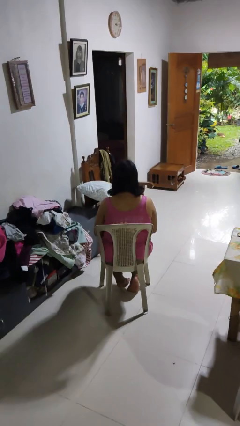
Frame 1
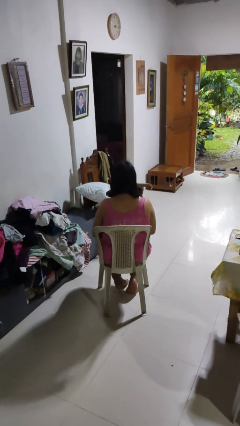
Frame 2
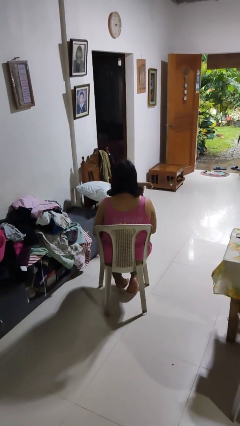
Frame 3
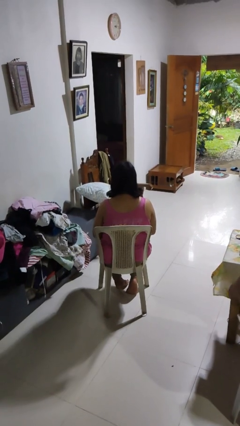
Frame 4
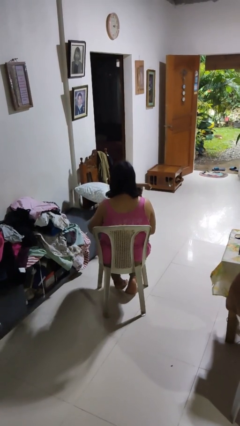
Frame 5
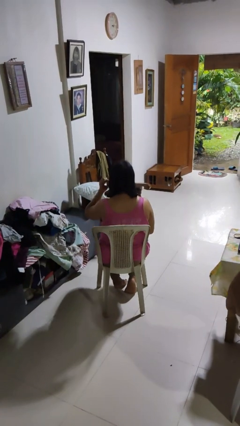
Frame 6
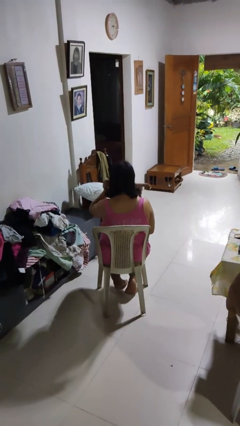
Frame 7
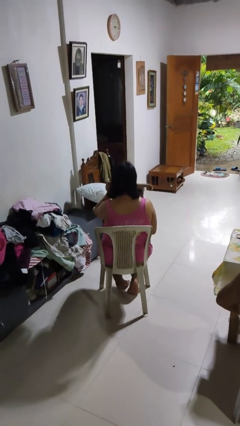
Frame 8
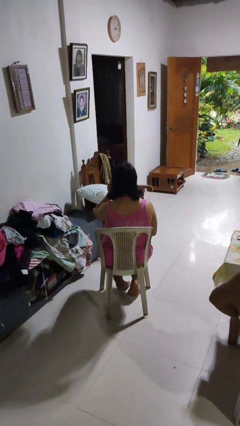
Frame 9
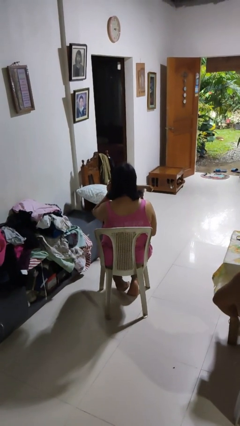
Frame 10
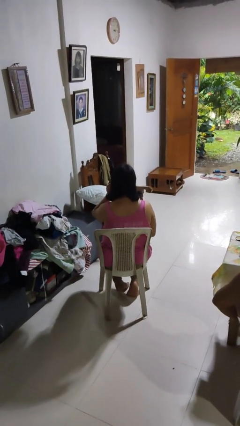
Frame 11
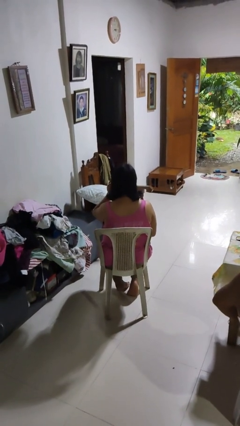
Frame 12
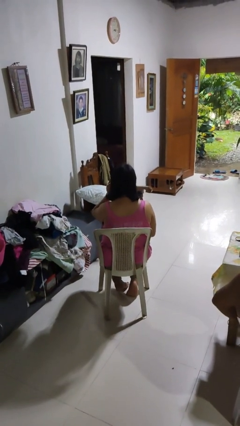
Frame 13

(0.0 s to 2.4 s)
person touches earlobe

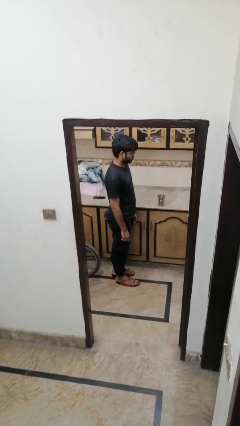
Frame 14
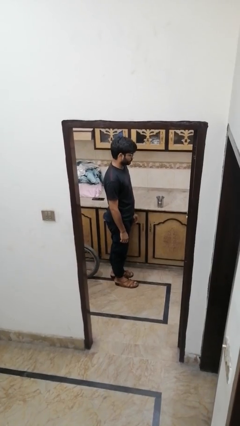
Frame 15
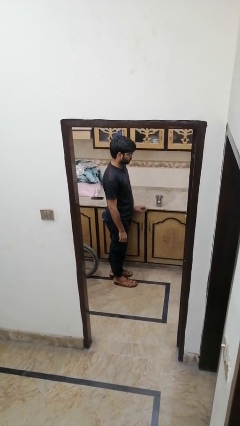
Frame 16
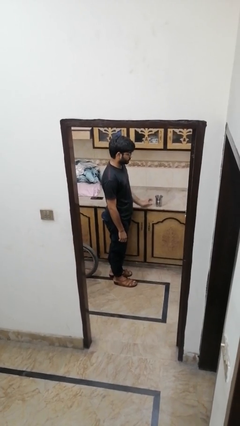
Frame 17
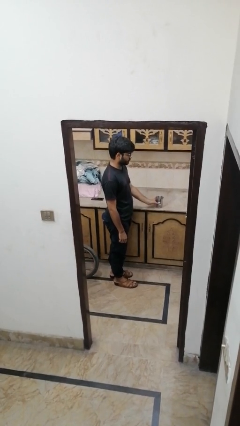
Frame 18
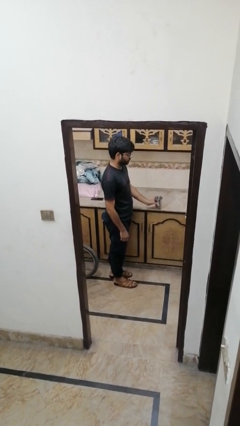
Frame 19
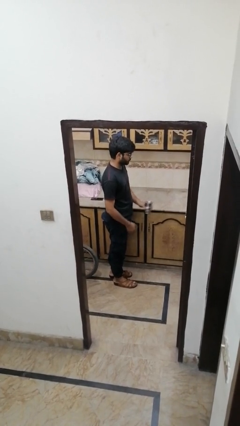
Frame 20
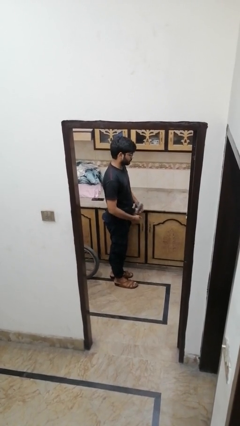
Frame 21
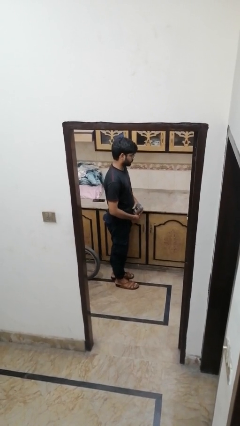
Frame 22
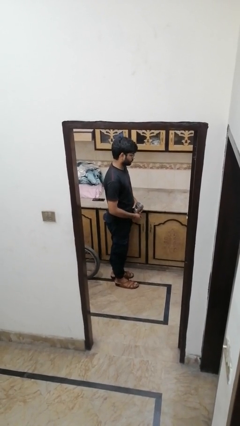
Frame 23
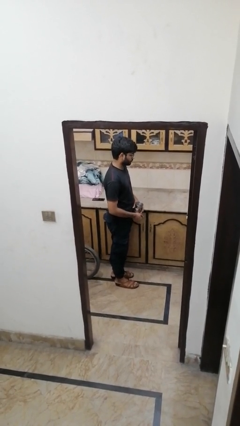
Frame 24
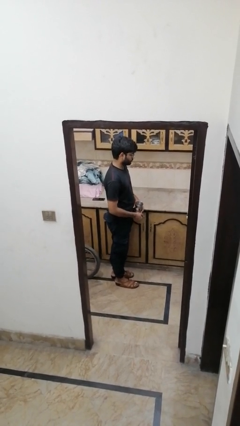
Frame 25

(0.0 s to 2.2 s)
person picks up object from countertop

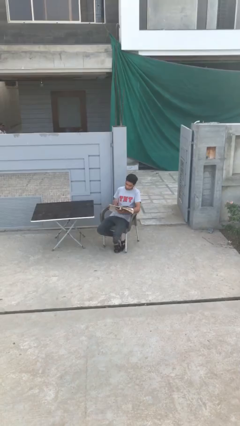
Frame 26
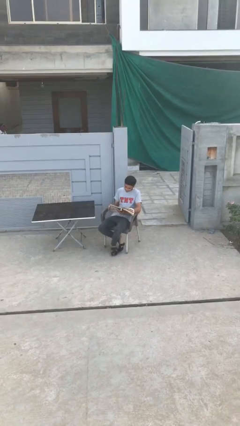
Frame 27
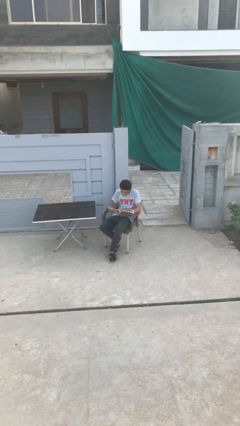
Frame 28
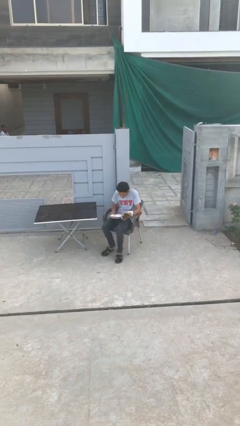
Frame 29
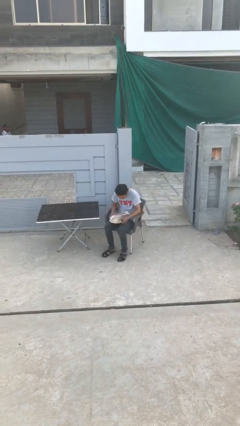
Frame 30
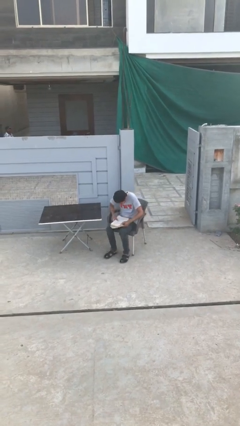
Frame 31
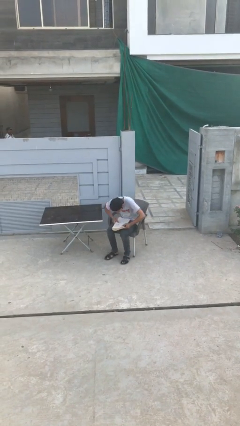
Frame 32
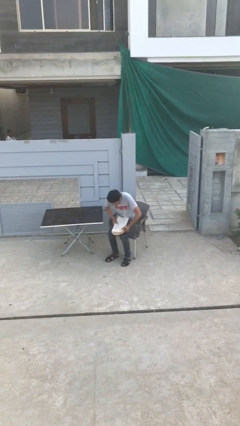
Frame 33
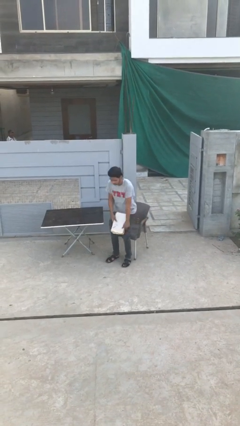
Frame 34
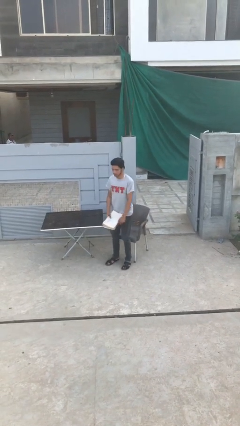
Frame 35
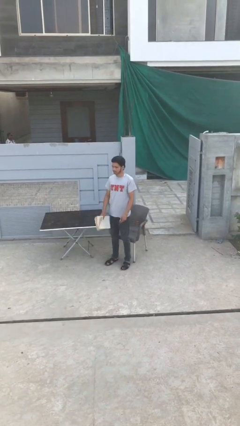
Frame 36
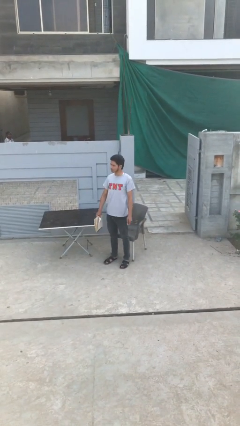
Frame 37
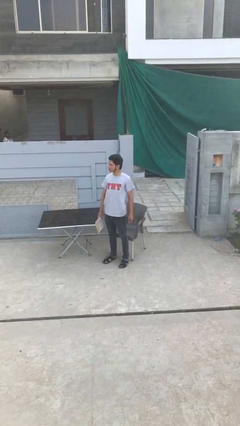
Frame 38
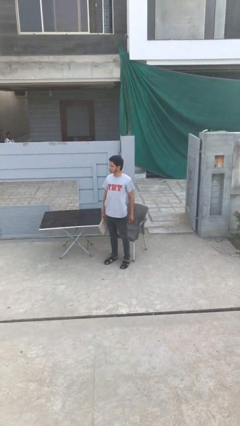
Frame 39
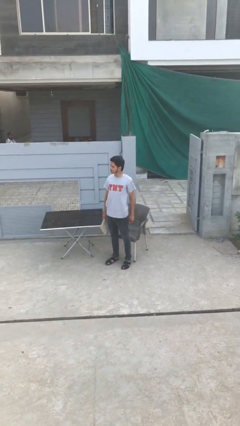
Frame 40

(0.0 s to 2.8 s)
person stands up

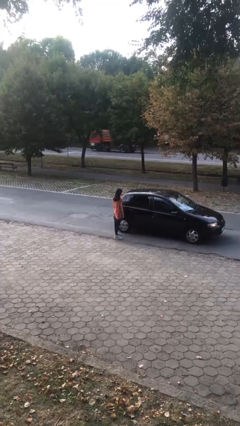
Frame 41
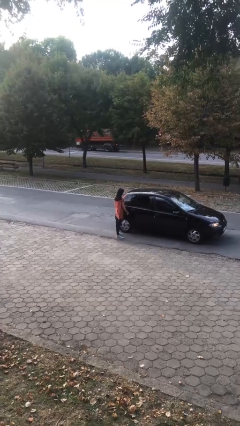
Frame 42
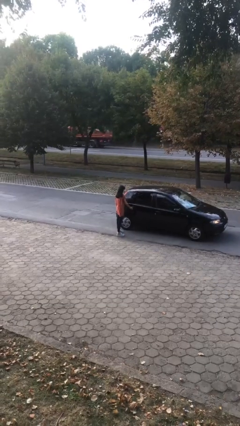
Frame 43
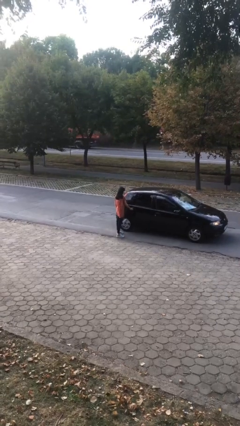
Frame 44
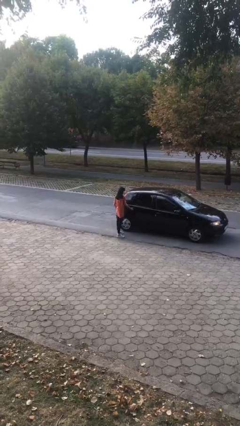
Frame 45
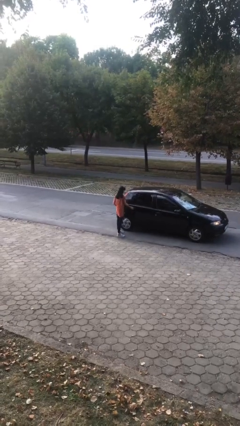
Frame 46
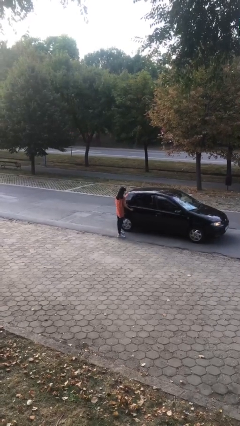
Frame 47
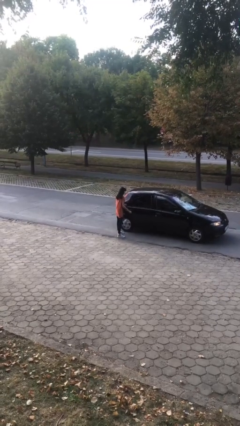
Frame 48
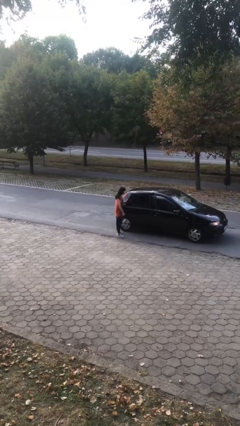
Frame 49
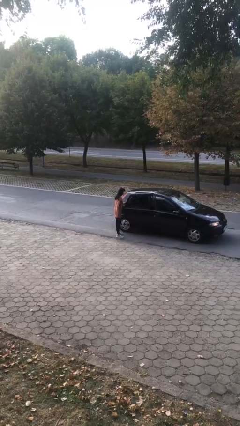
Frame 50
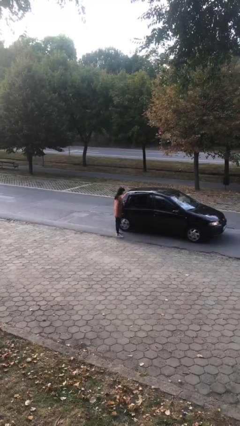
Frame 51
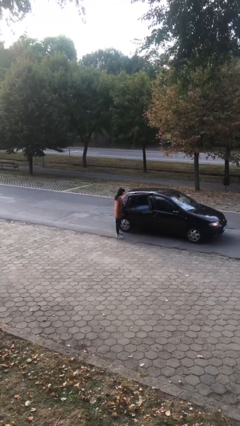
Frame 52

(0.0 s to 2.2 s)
person opens car door

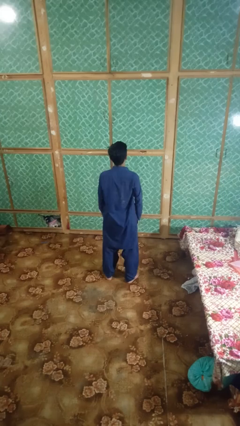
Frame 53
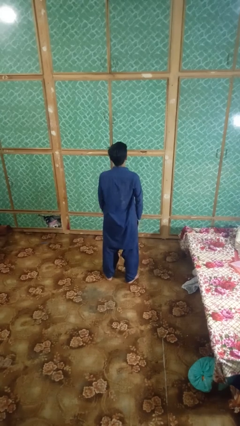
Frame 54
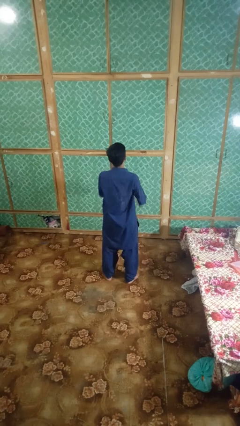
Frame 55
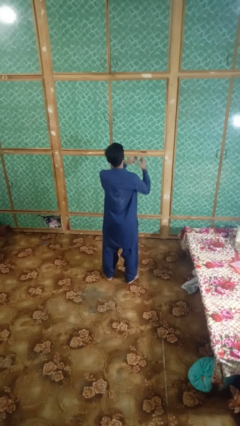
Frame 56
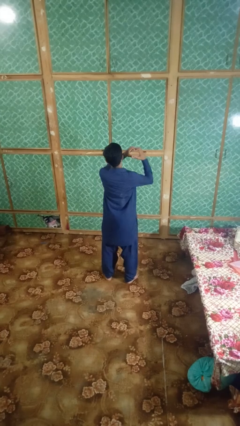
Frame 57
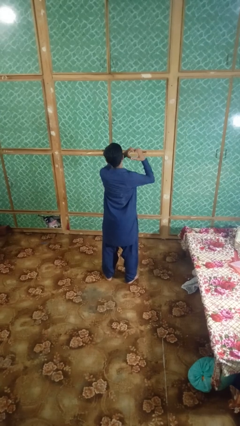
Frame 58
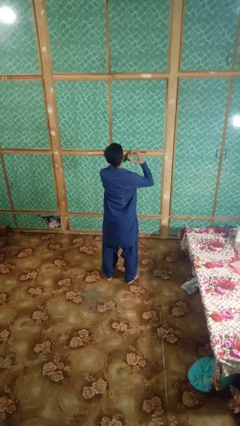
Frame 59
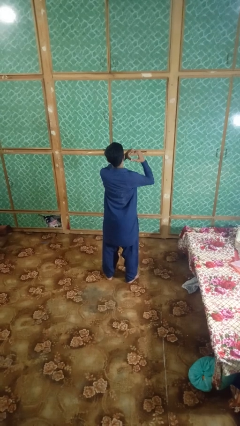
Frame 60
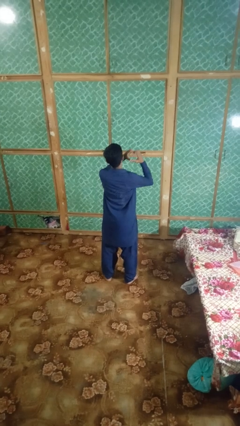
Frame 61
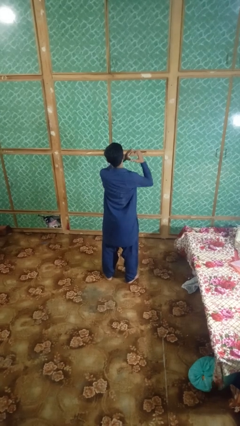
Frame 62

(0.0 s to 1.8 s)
person gestures heart

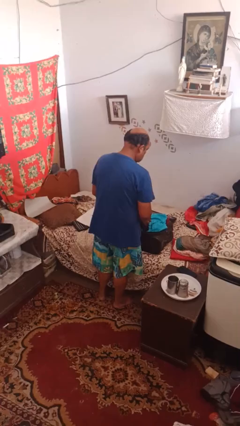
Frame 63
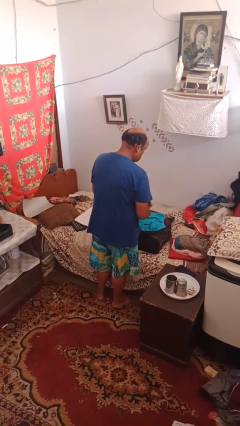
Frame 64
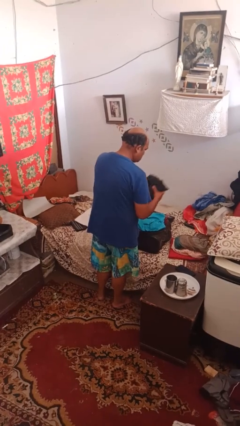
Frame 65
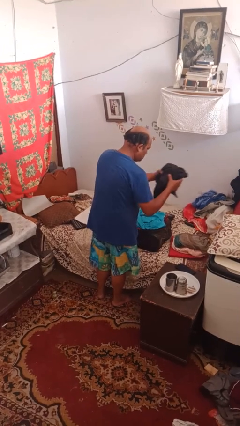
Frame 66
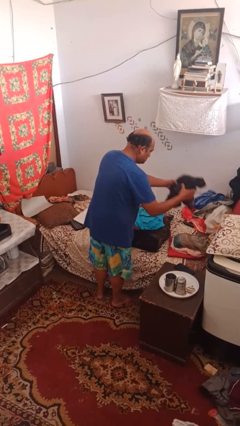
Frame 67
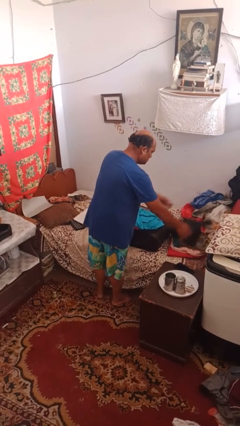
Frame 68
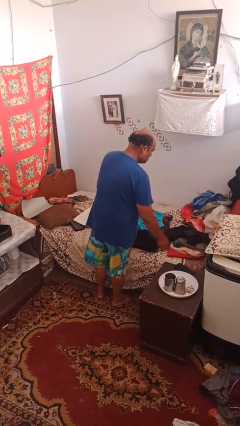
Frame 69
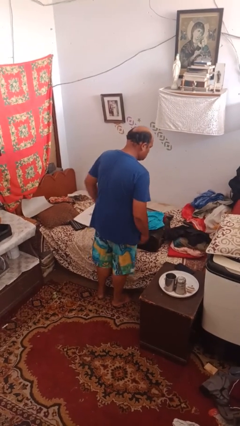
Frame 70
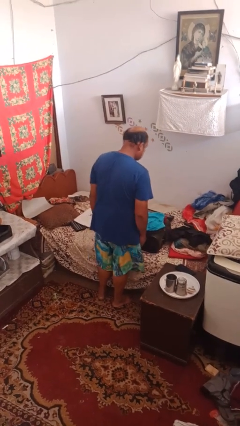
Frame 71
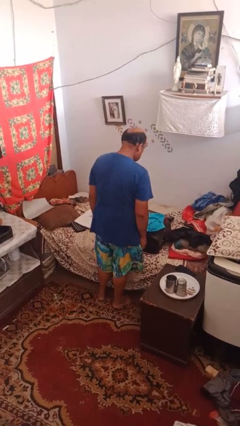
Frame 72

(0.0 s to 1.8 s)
person unloads clothes from suitcase

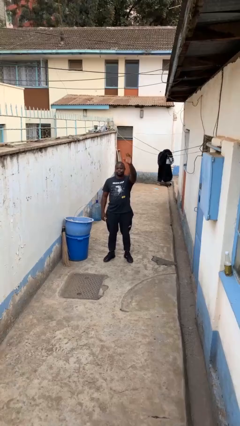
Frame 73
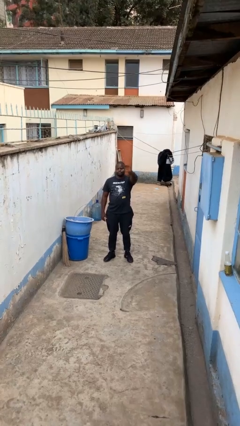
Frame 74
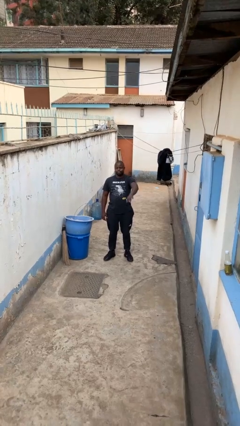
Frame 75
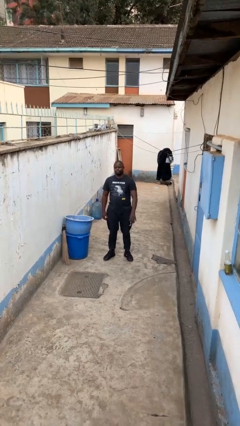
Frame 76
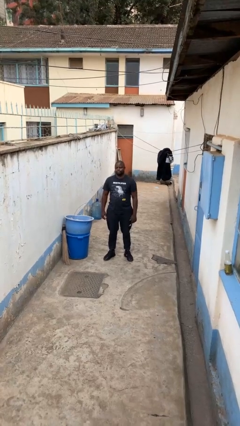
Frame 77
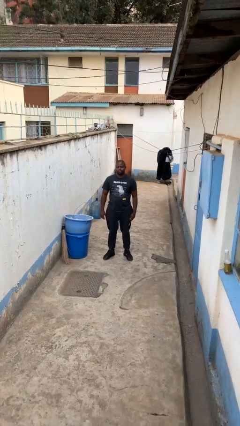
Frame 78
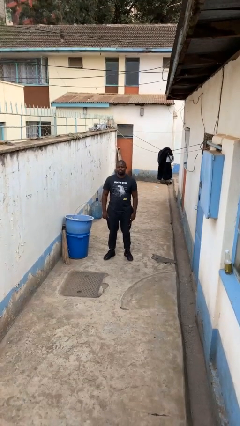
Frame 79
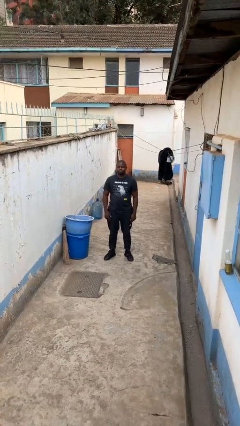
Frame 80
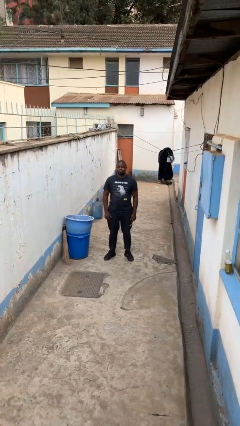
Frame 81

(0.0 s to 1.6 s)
person gestures swipe down

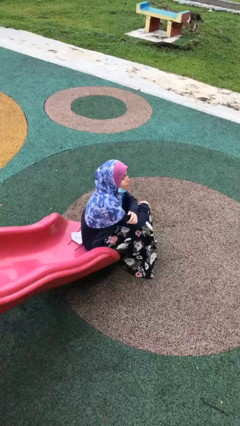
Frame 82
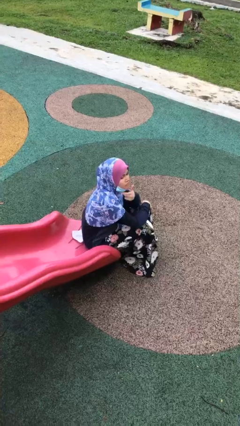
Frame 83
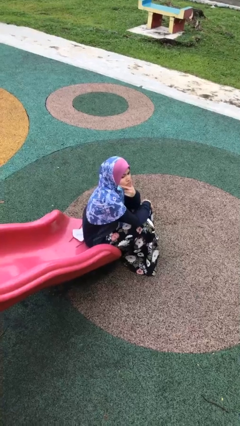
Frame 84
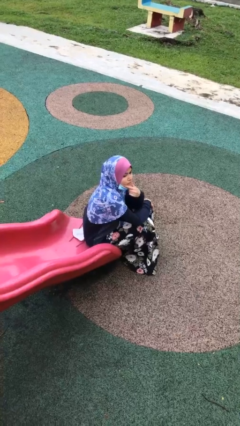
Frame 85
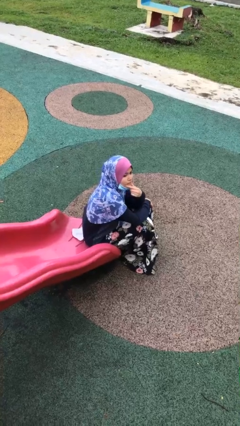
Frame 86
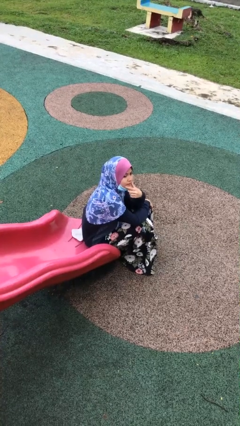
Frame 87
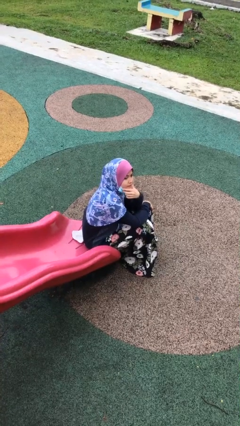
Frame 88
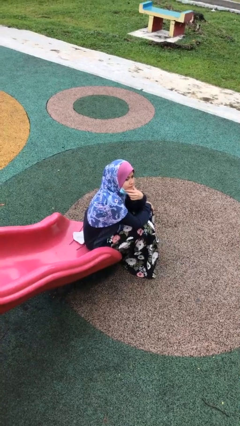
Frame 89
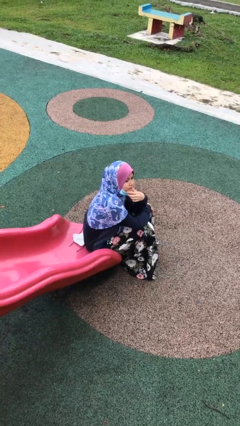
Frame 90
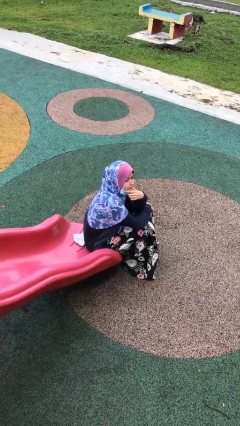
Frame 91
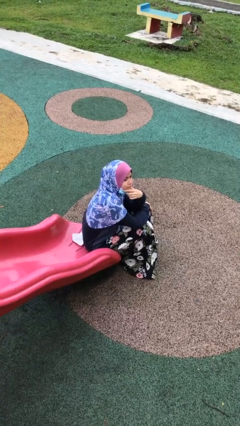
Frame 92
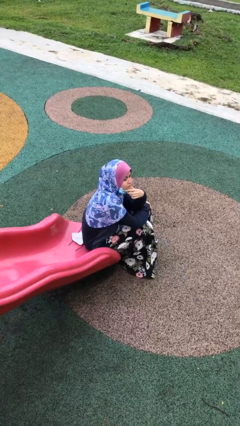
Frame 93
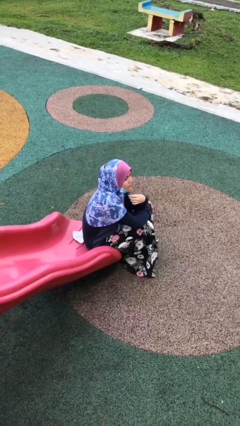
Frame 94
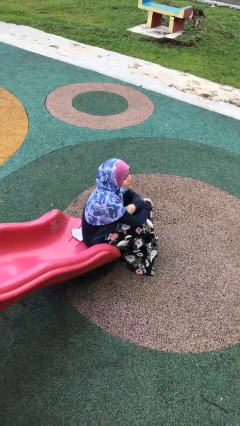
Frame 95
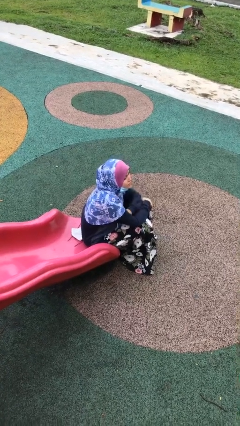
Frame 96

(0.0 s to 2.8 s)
person strokes chin
